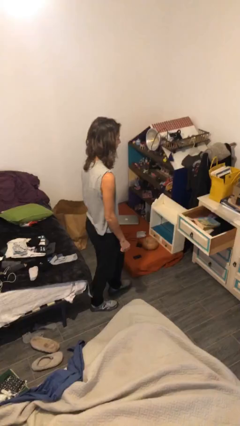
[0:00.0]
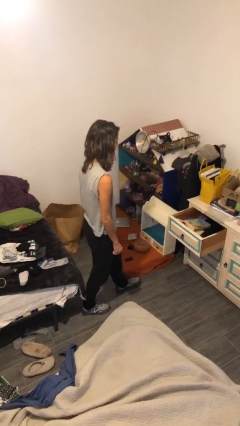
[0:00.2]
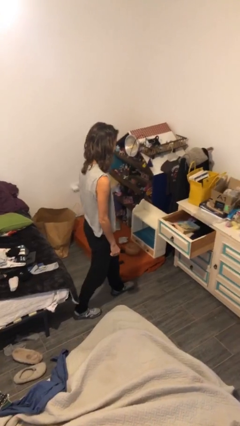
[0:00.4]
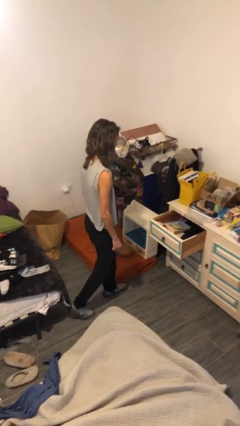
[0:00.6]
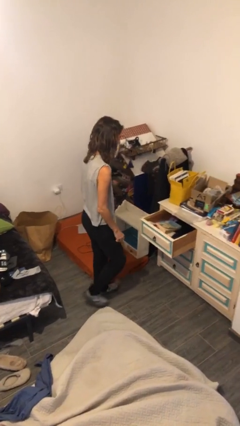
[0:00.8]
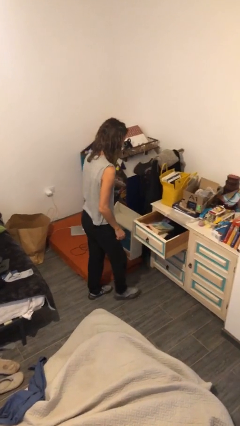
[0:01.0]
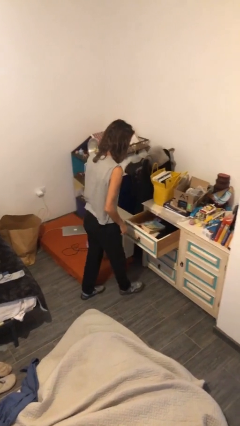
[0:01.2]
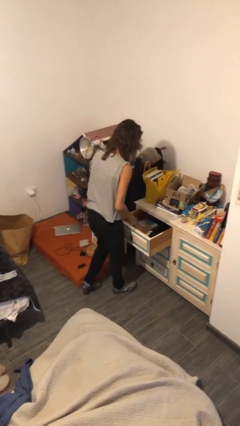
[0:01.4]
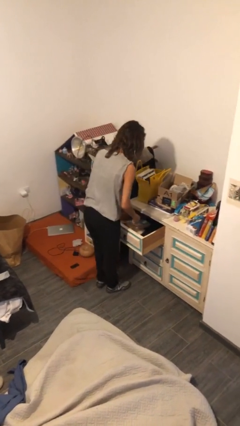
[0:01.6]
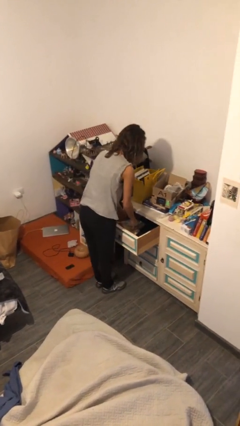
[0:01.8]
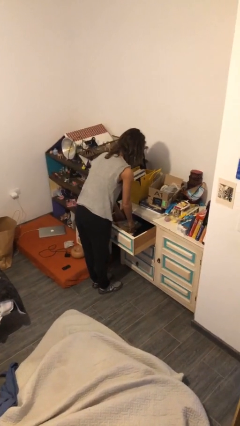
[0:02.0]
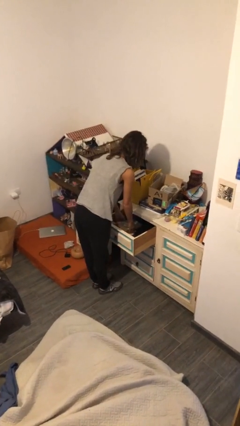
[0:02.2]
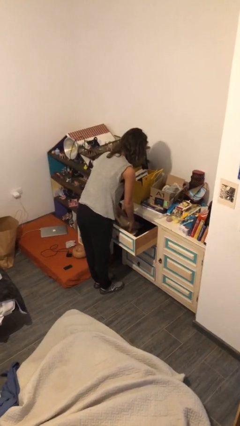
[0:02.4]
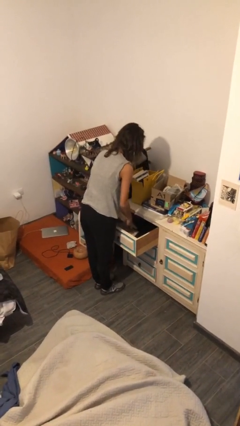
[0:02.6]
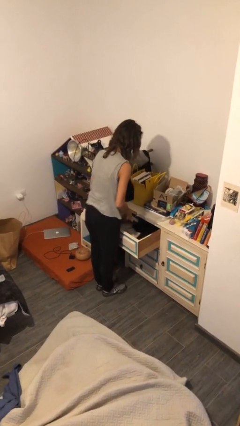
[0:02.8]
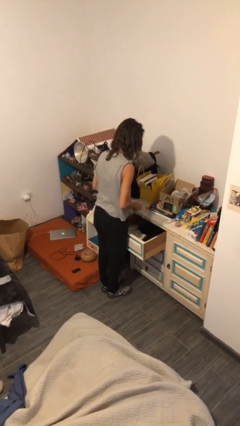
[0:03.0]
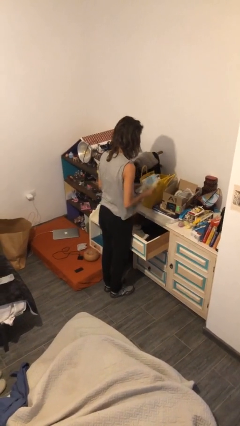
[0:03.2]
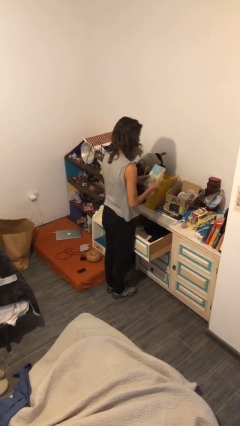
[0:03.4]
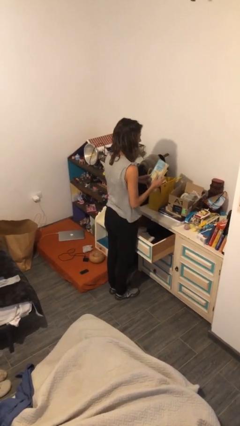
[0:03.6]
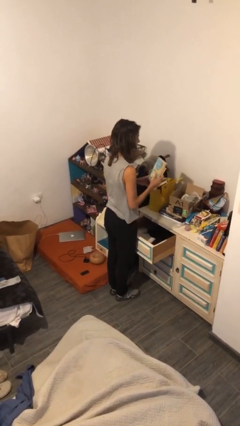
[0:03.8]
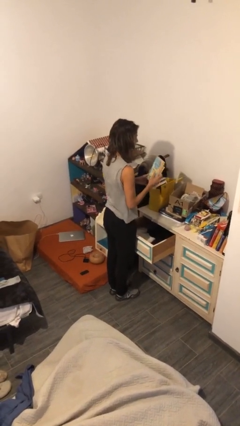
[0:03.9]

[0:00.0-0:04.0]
person picks up object from cabinet

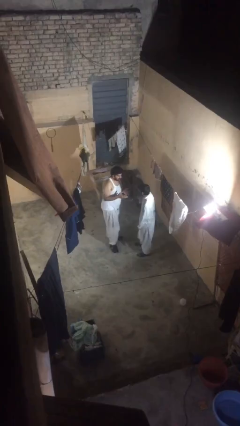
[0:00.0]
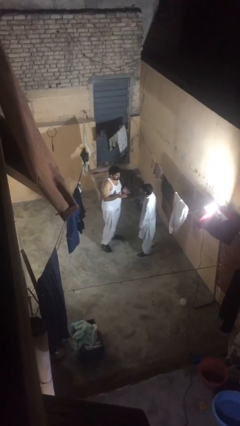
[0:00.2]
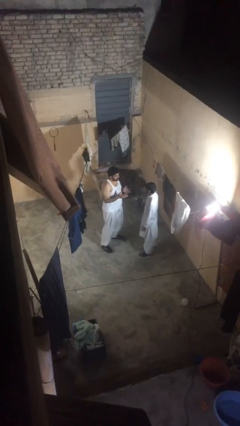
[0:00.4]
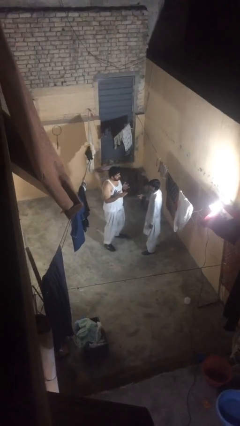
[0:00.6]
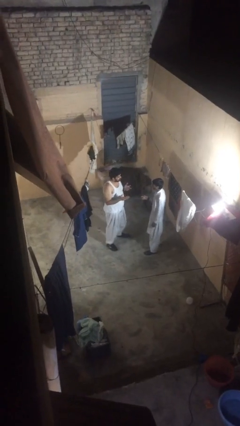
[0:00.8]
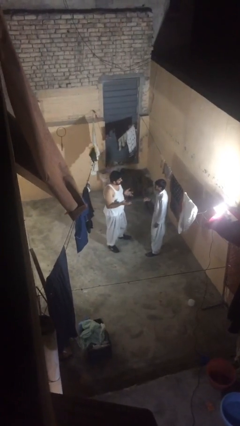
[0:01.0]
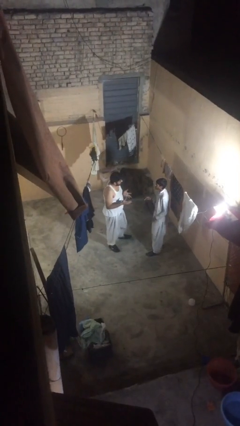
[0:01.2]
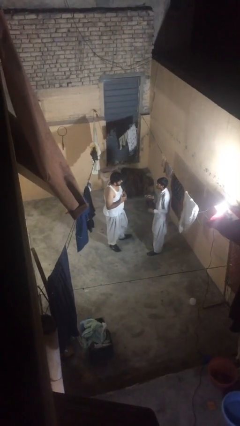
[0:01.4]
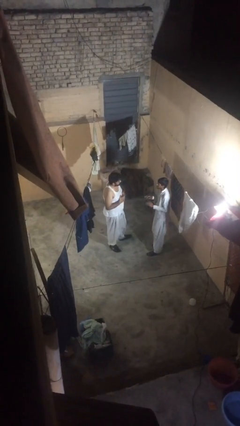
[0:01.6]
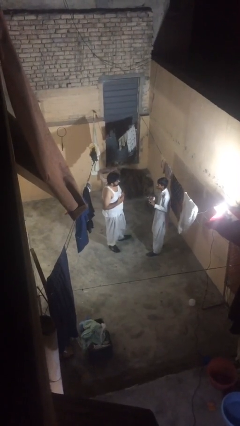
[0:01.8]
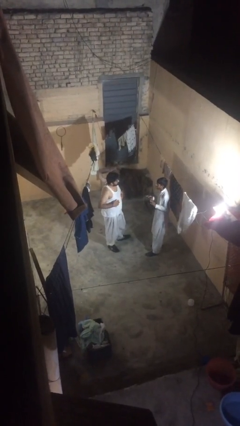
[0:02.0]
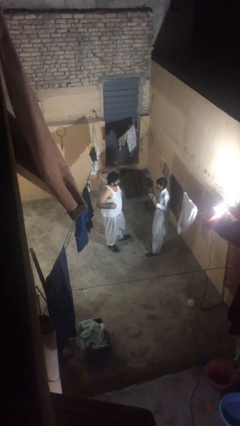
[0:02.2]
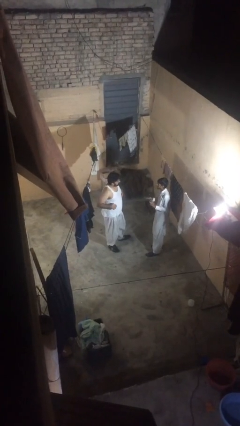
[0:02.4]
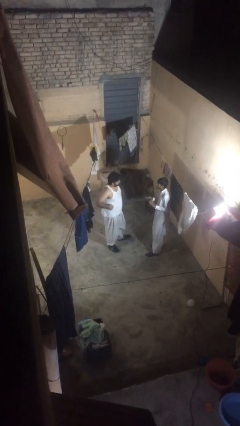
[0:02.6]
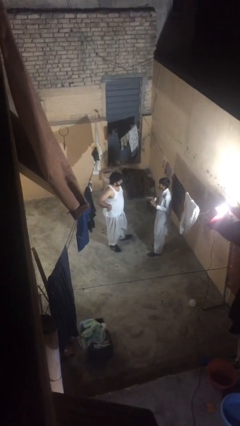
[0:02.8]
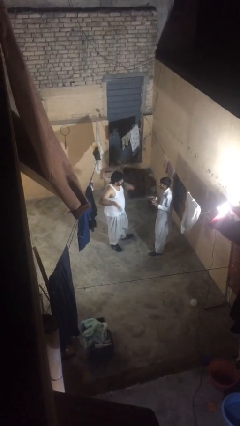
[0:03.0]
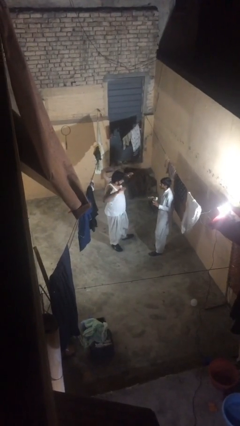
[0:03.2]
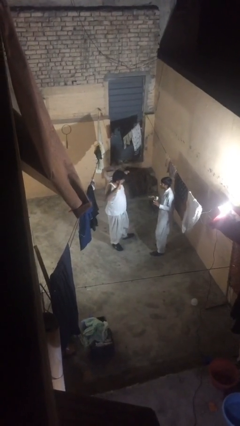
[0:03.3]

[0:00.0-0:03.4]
person talks to person

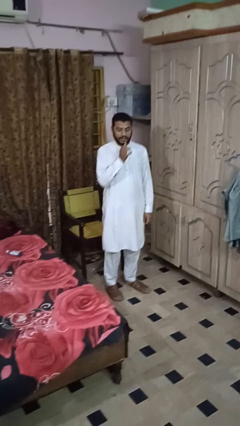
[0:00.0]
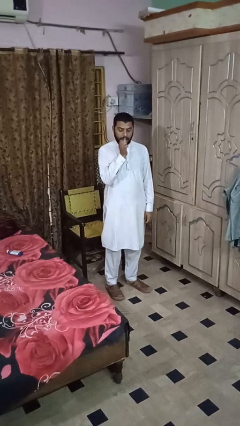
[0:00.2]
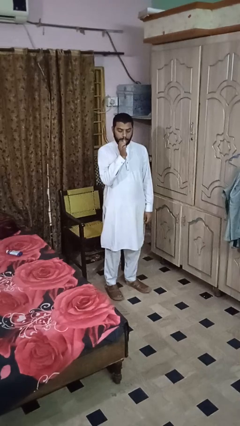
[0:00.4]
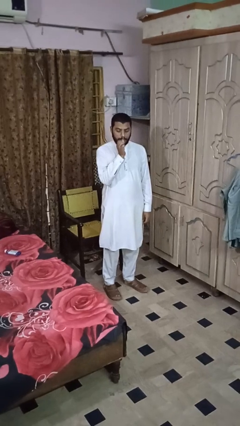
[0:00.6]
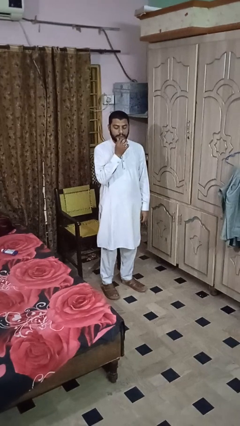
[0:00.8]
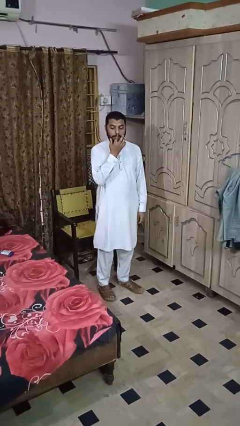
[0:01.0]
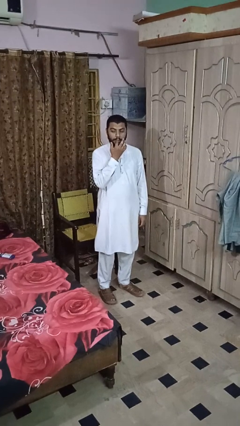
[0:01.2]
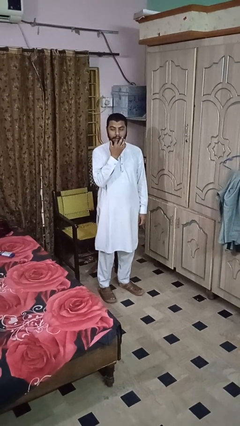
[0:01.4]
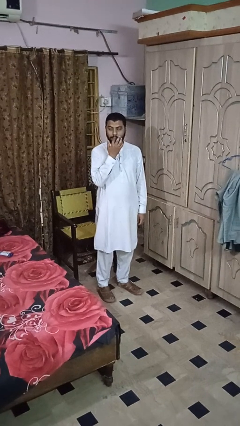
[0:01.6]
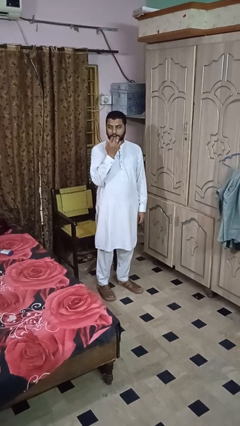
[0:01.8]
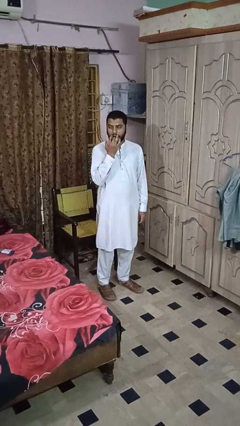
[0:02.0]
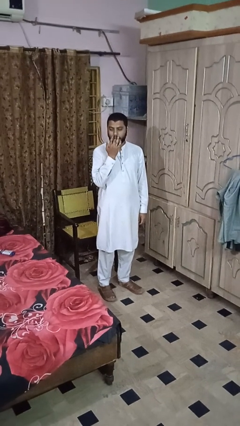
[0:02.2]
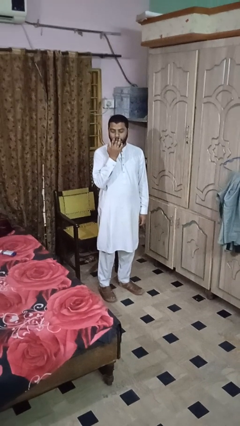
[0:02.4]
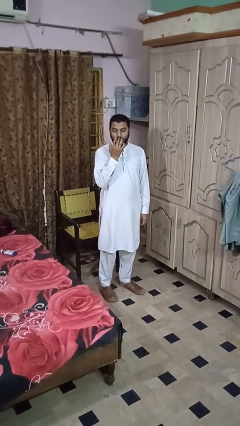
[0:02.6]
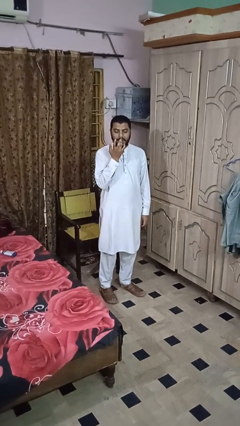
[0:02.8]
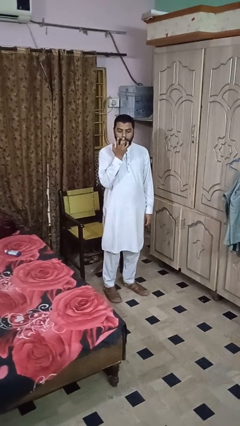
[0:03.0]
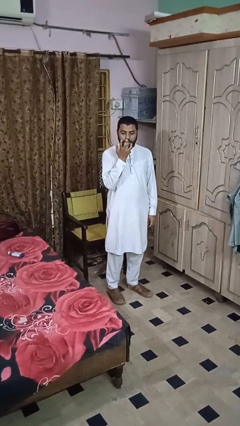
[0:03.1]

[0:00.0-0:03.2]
person licks fingers

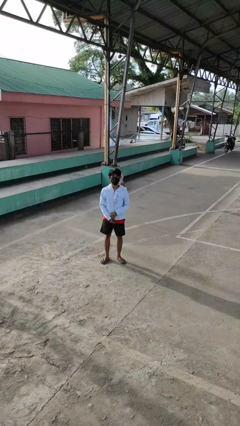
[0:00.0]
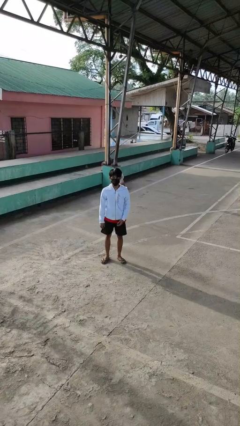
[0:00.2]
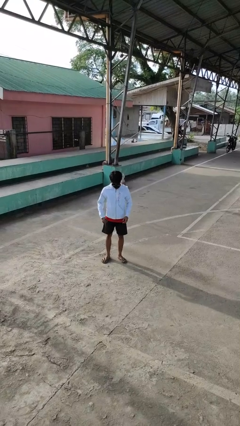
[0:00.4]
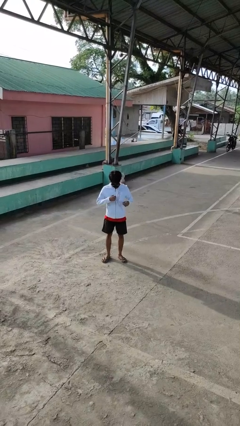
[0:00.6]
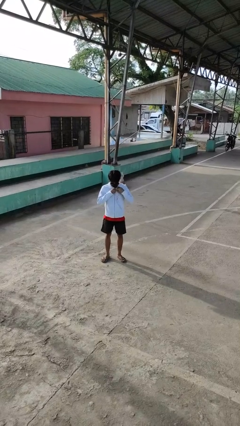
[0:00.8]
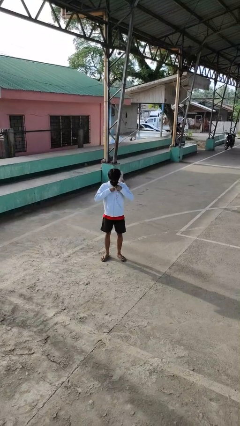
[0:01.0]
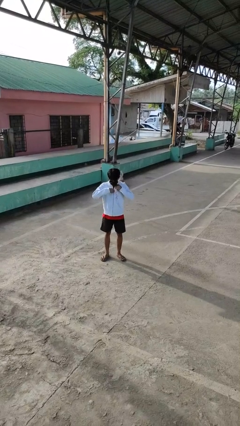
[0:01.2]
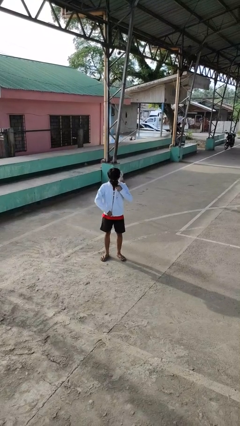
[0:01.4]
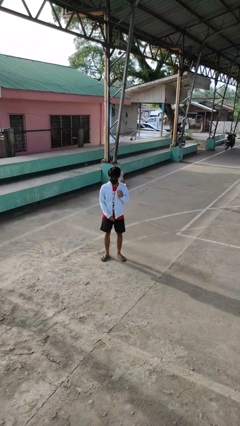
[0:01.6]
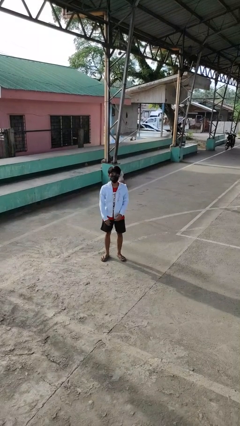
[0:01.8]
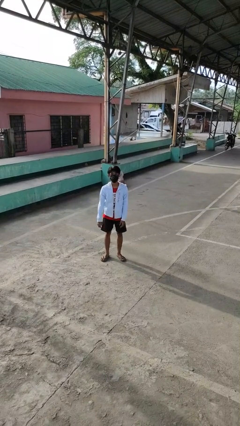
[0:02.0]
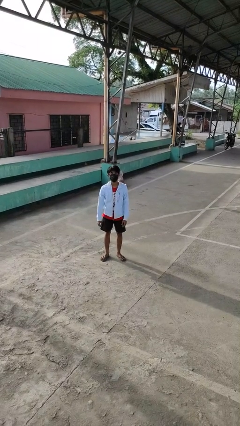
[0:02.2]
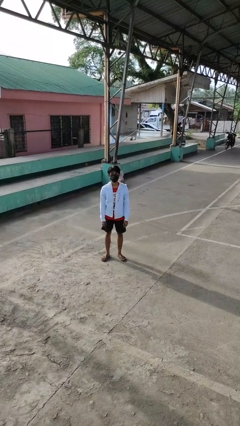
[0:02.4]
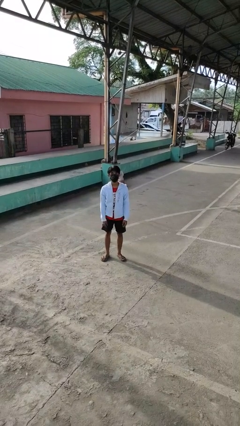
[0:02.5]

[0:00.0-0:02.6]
person unzips jacket

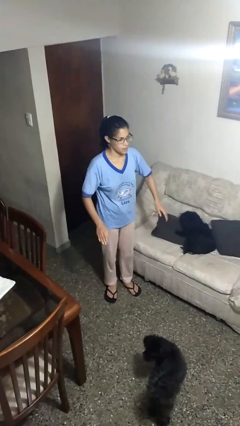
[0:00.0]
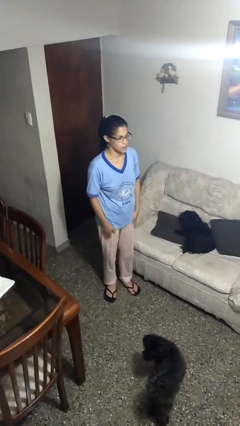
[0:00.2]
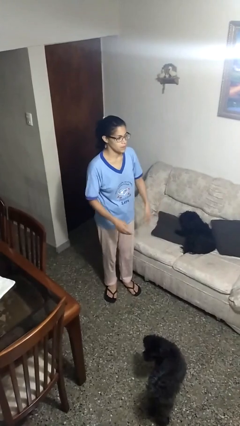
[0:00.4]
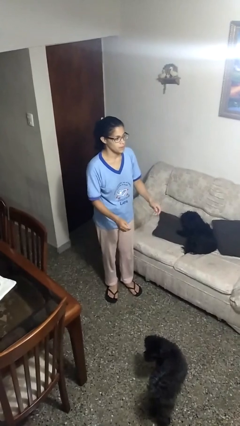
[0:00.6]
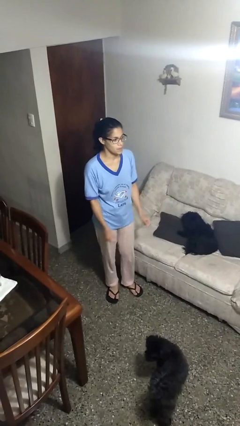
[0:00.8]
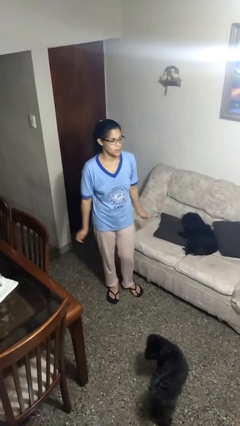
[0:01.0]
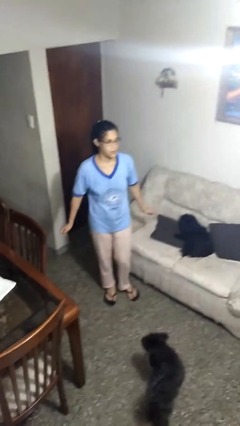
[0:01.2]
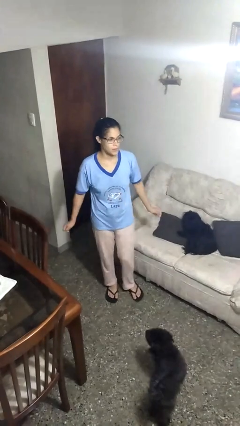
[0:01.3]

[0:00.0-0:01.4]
person slaps hands on thighs

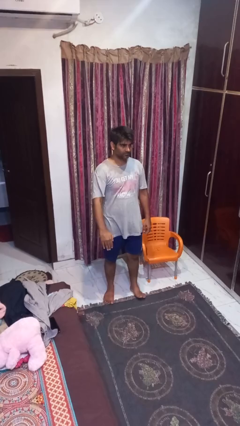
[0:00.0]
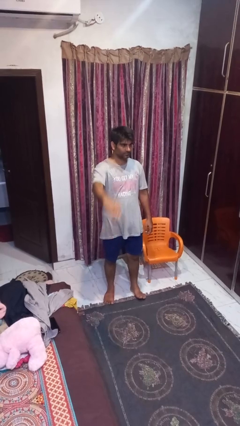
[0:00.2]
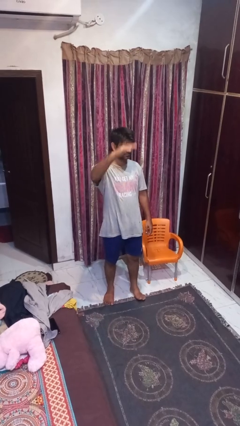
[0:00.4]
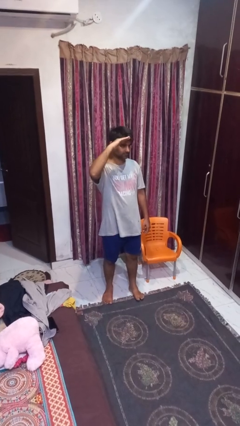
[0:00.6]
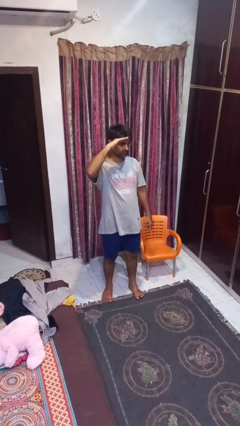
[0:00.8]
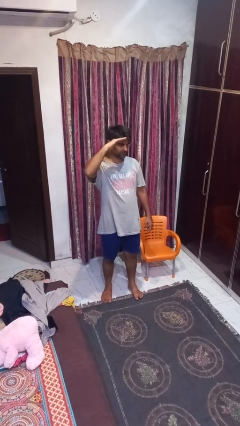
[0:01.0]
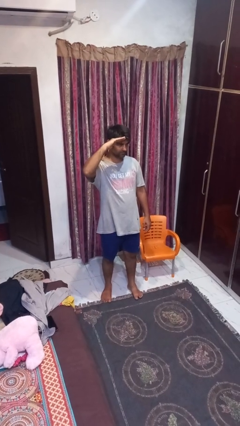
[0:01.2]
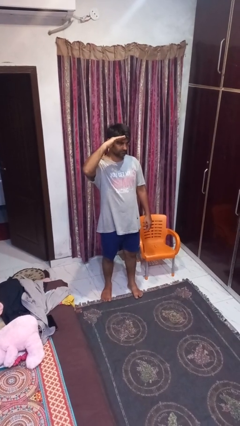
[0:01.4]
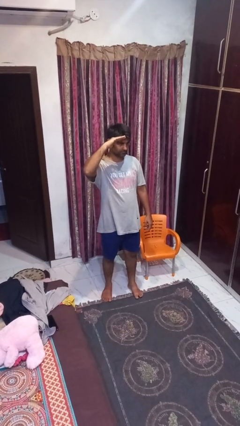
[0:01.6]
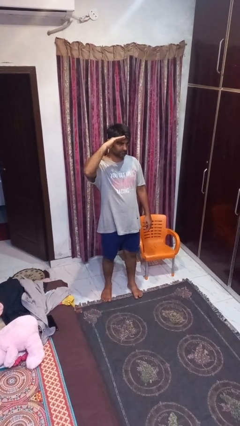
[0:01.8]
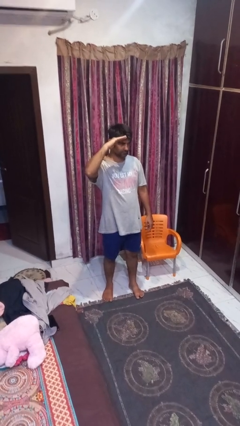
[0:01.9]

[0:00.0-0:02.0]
person salutes

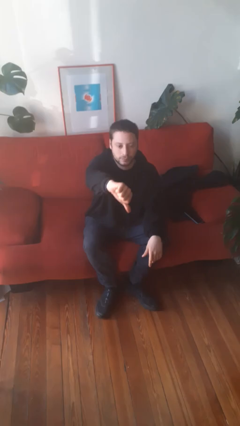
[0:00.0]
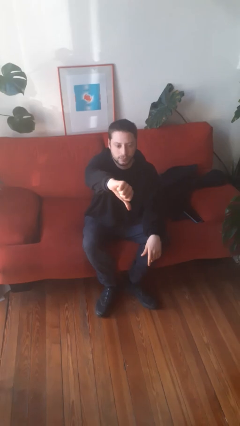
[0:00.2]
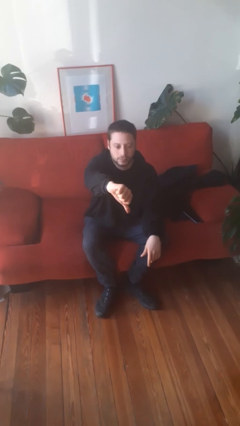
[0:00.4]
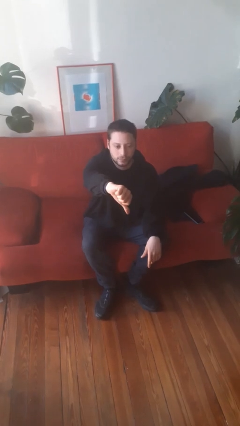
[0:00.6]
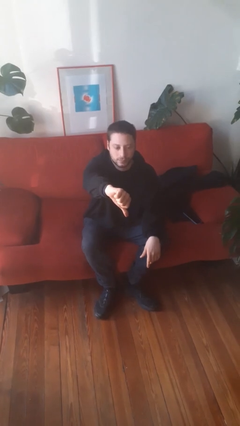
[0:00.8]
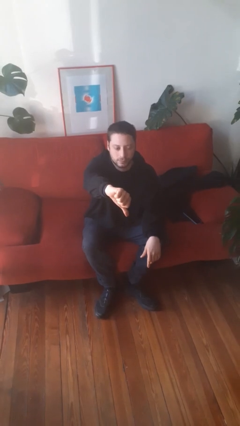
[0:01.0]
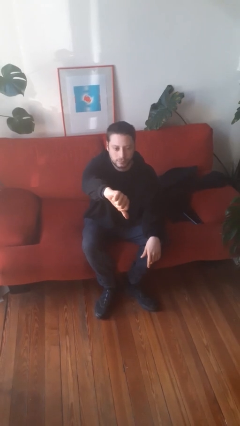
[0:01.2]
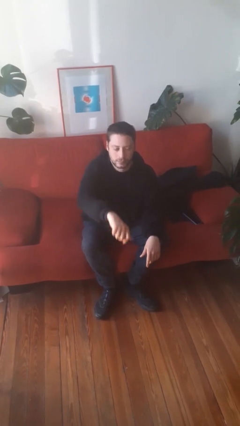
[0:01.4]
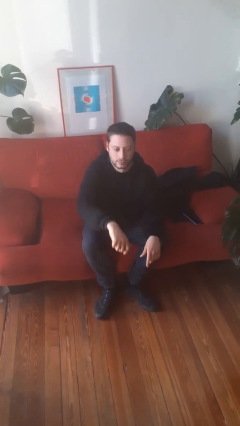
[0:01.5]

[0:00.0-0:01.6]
person gestures thumbs down
